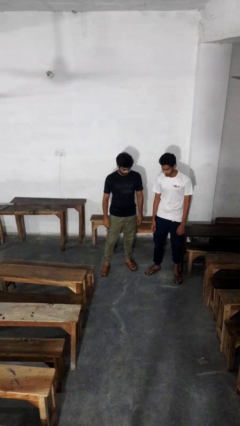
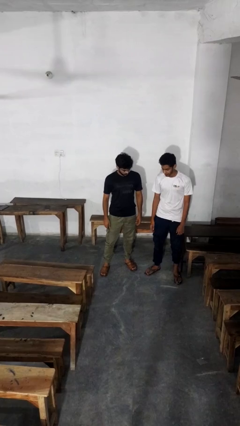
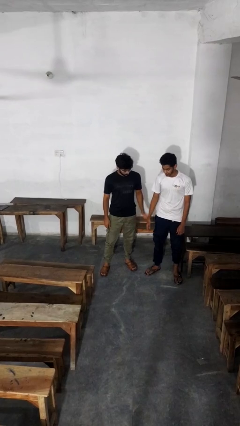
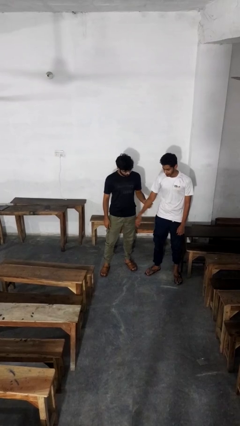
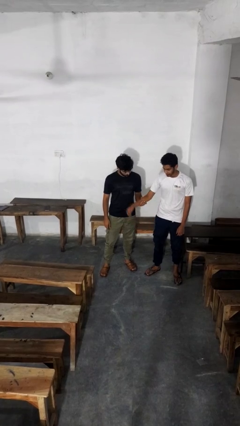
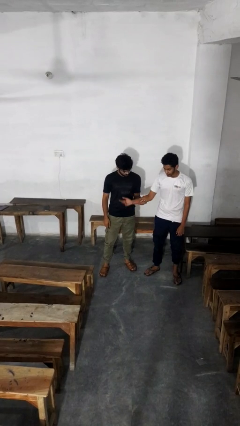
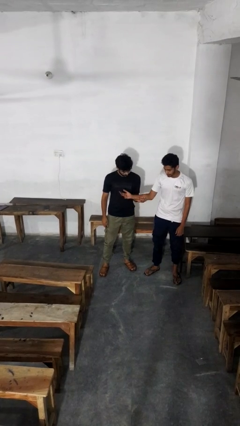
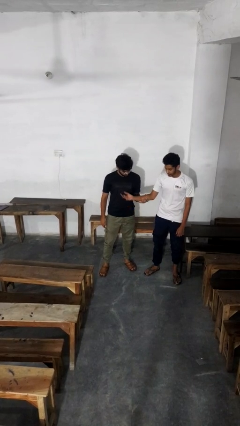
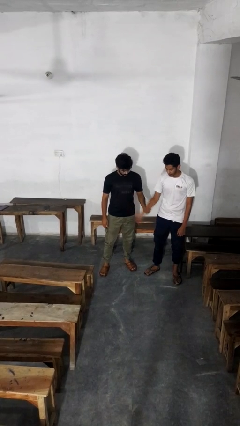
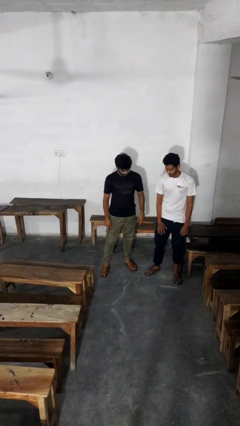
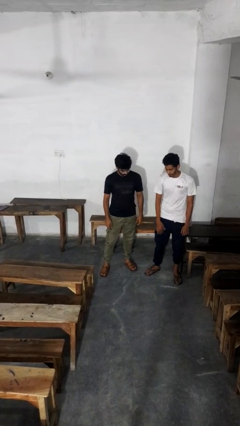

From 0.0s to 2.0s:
person grabs person by forearm

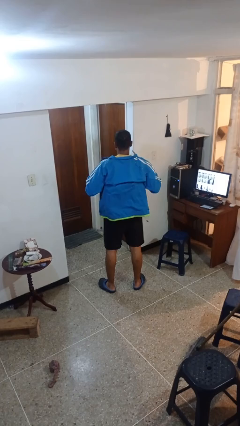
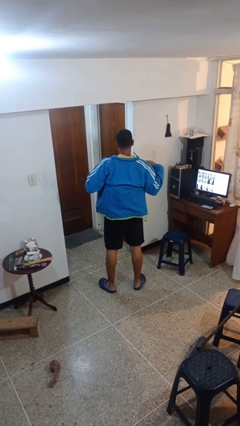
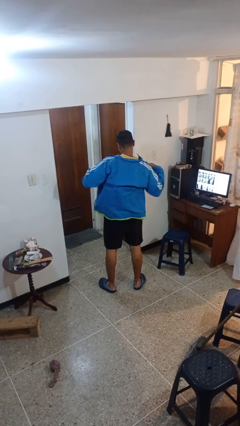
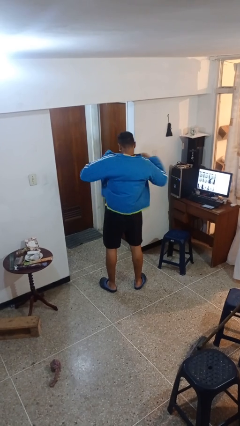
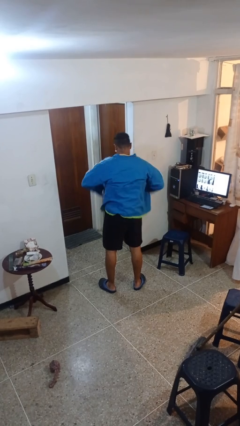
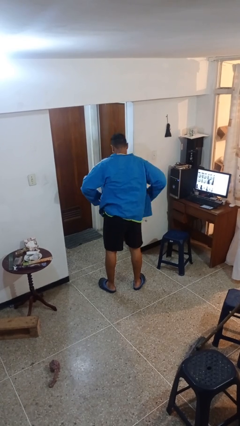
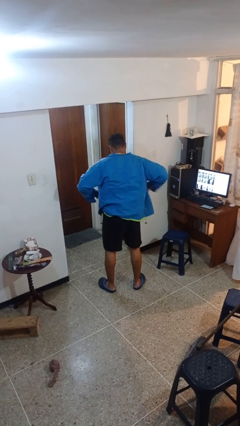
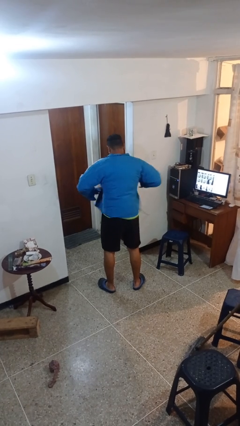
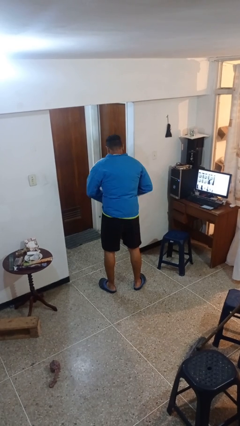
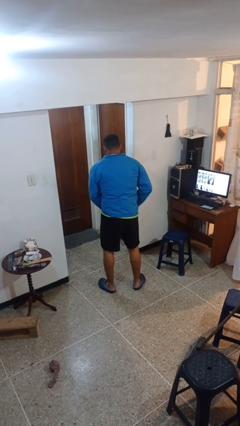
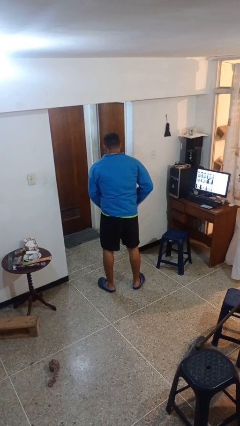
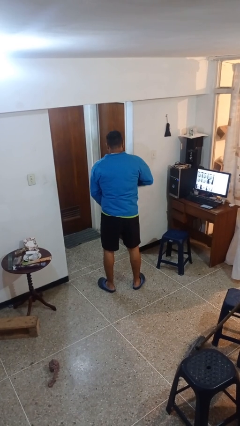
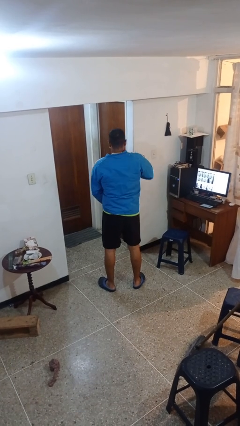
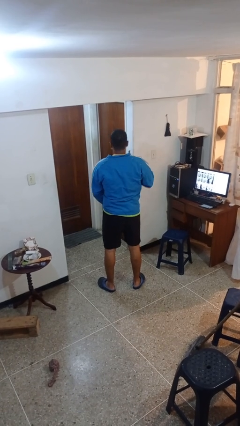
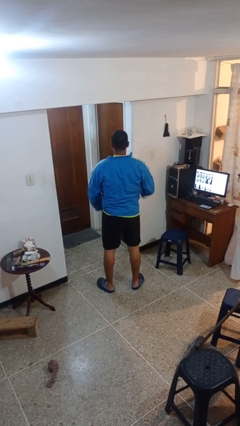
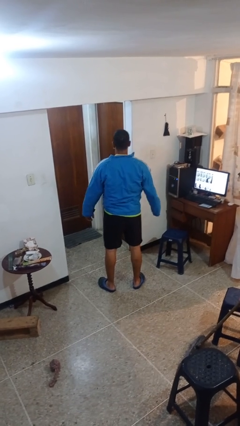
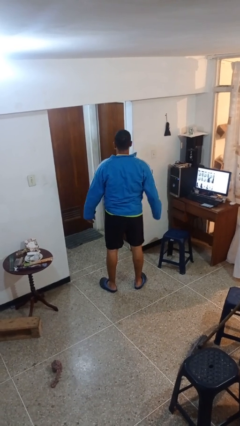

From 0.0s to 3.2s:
person zips up jacket

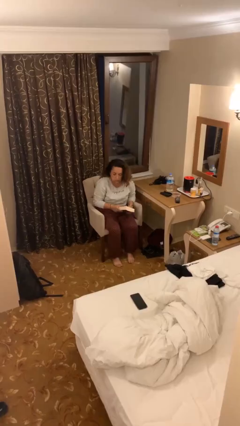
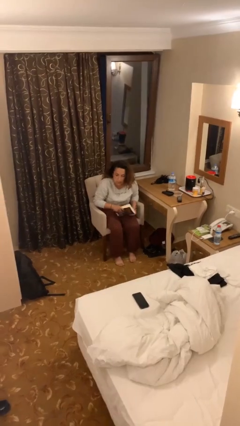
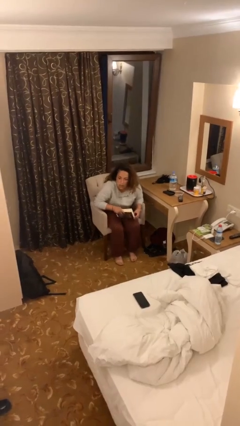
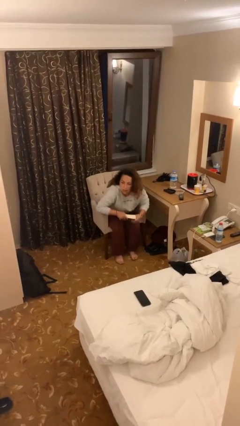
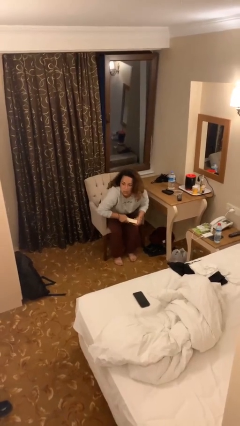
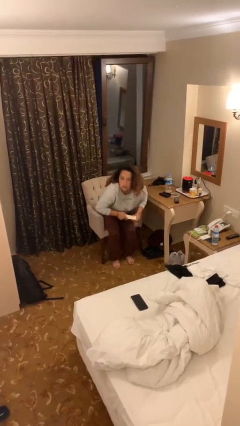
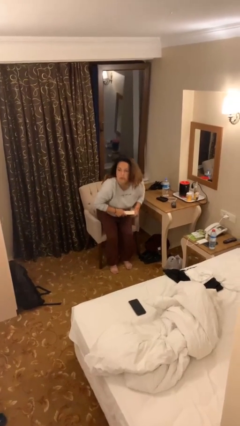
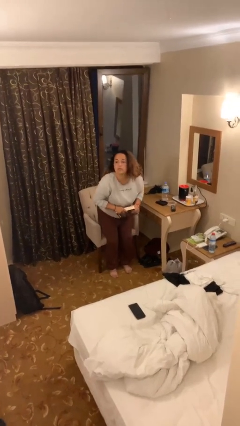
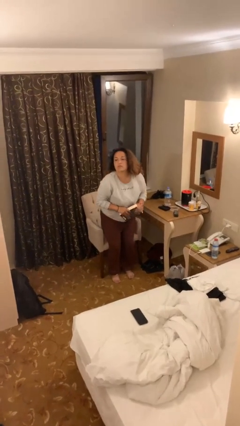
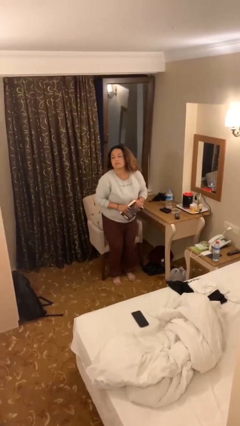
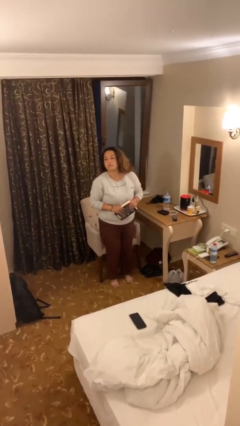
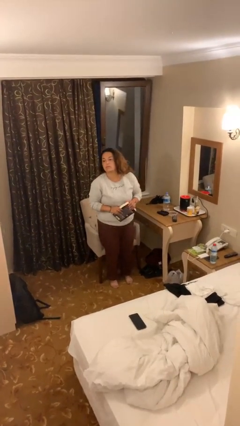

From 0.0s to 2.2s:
person stands up

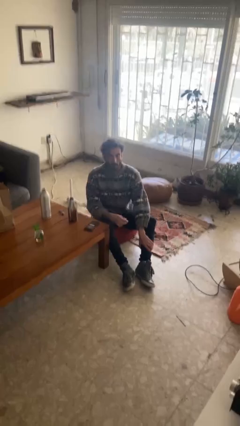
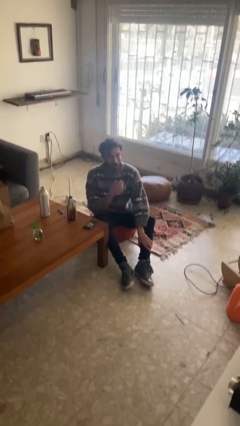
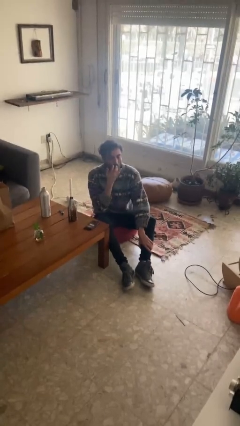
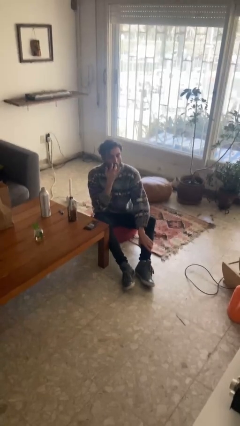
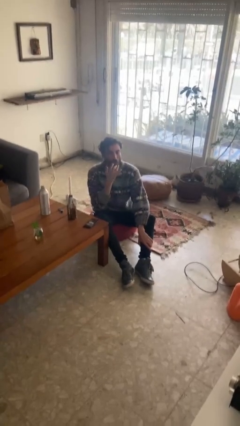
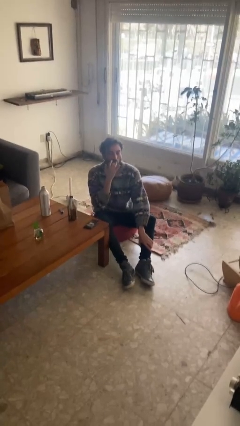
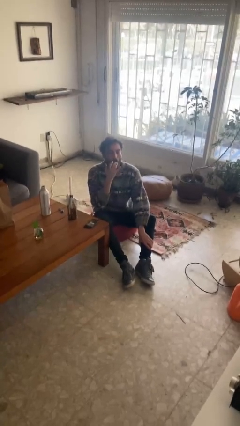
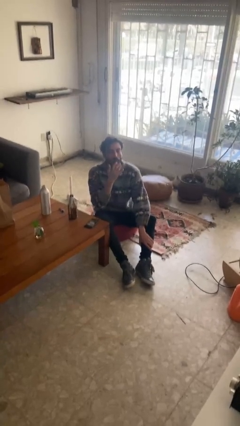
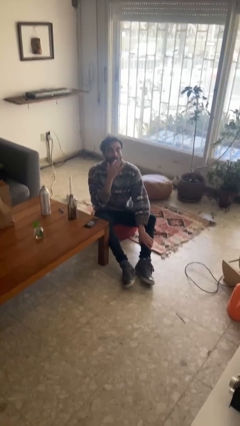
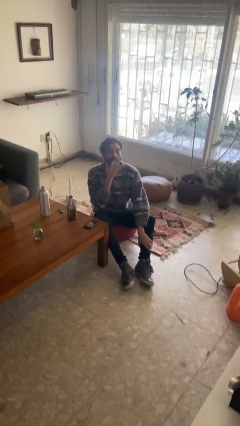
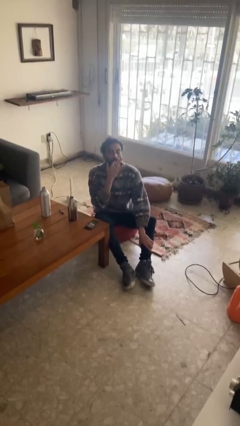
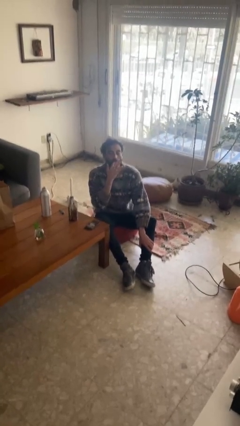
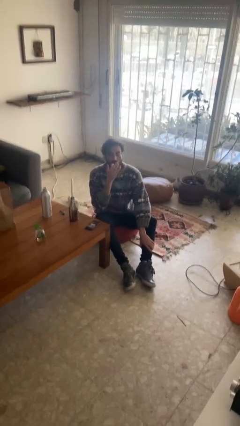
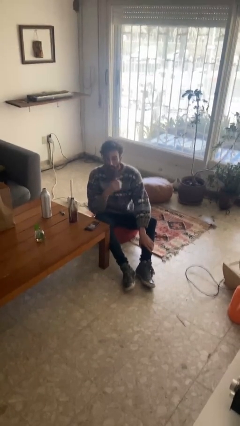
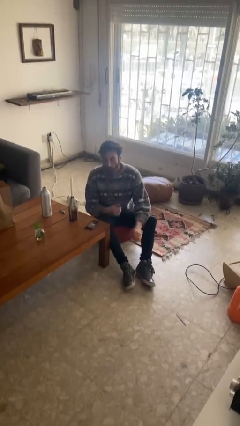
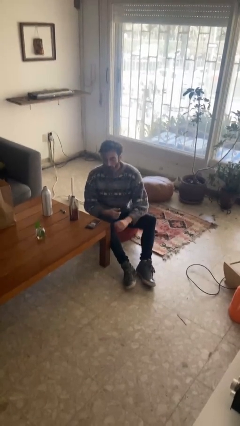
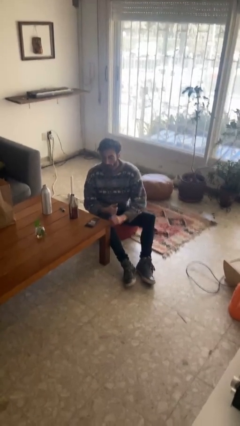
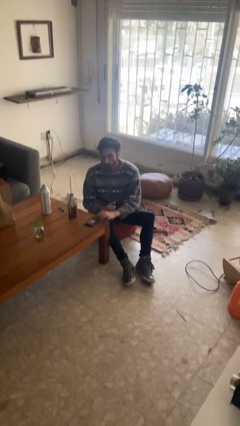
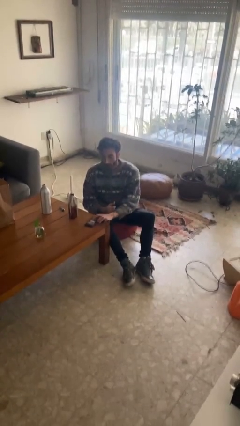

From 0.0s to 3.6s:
person licks fingers

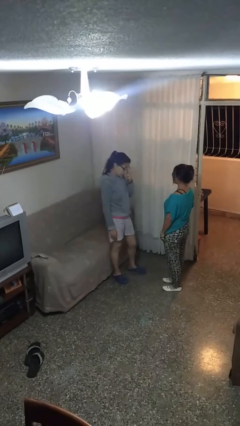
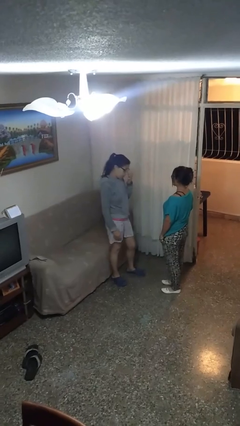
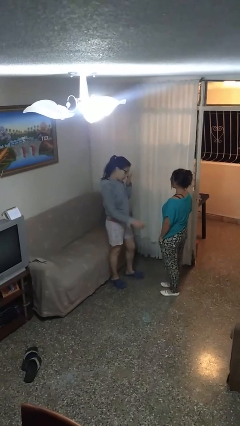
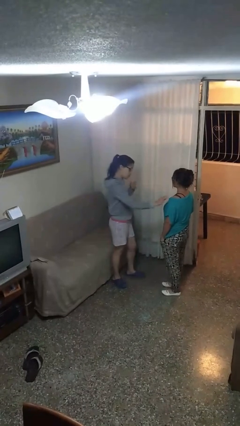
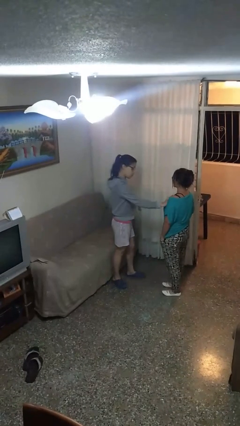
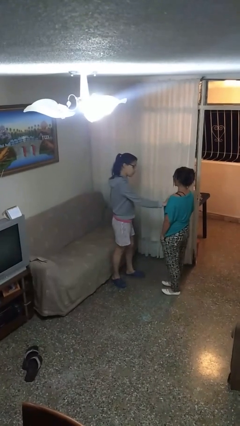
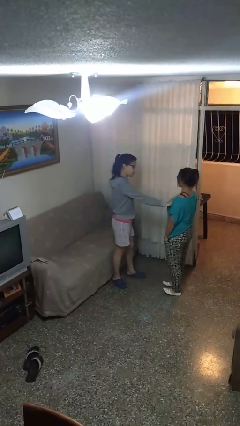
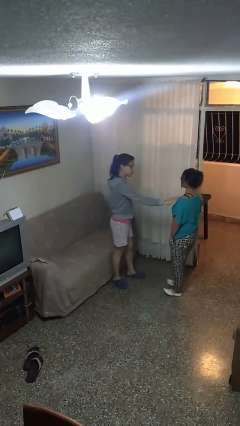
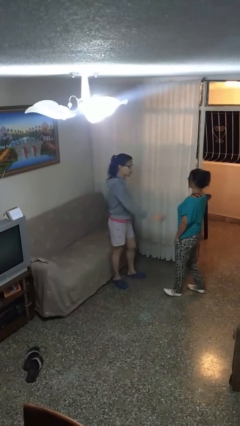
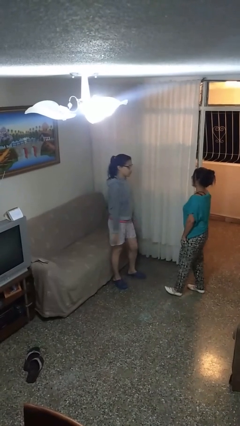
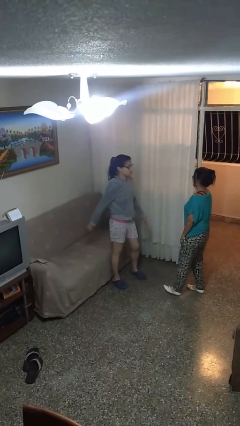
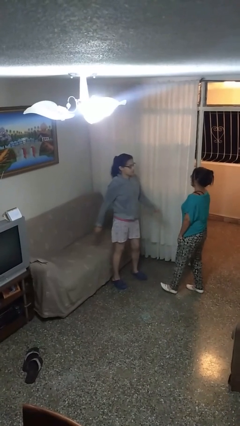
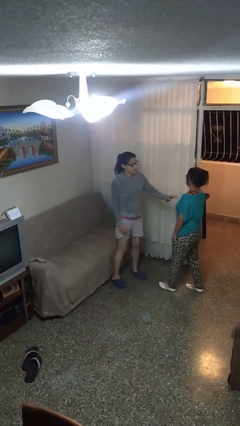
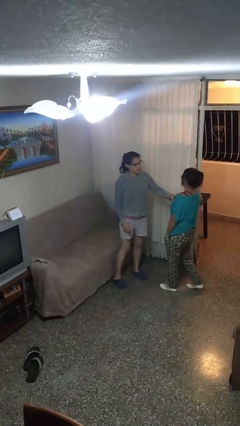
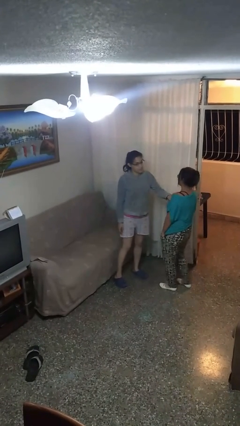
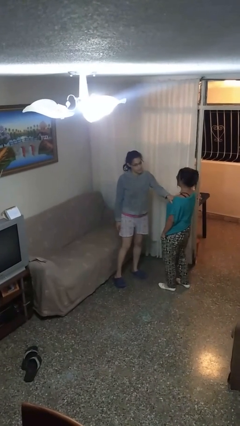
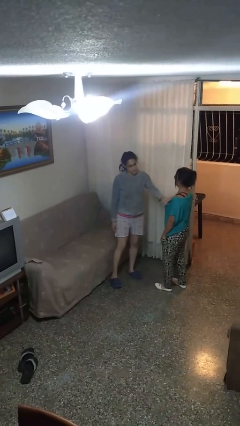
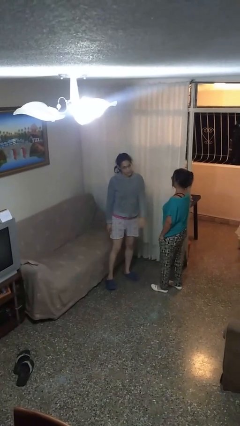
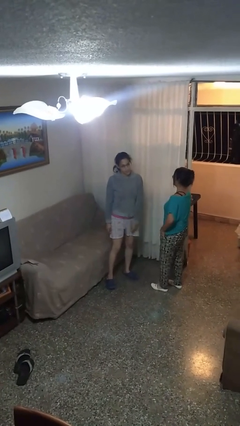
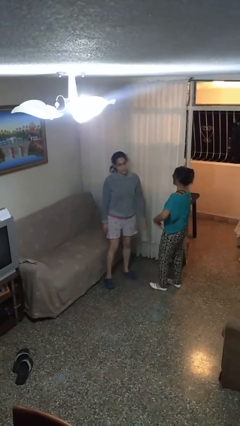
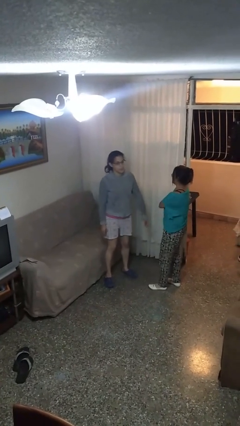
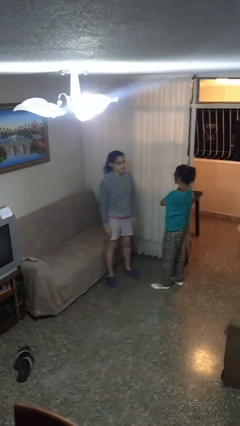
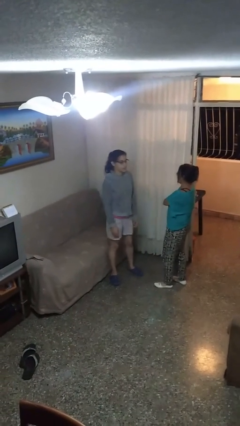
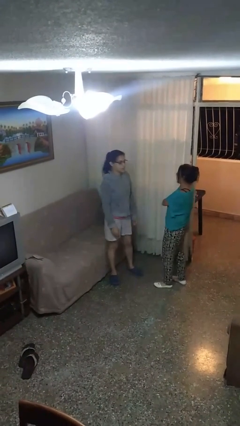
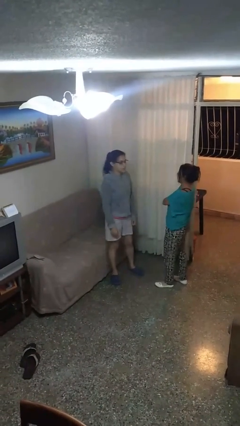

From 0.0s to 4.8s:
person shoves person

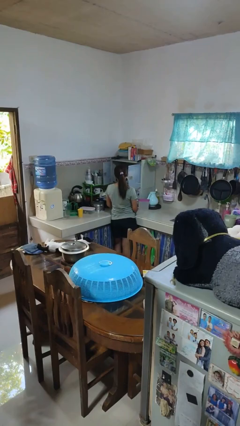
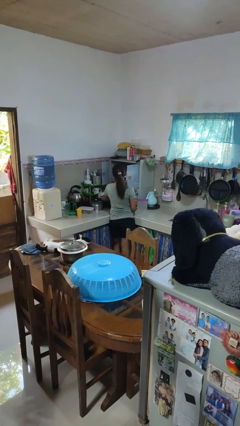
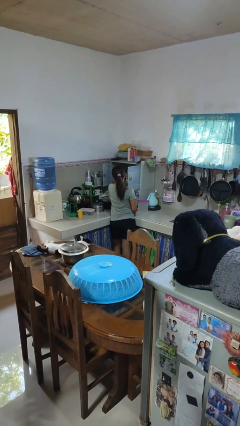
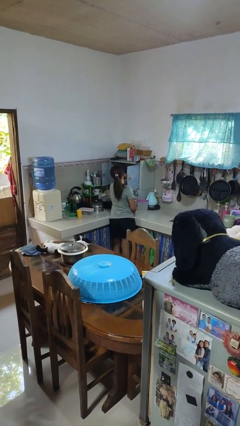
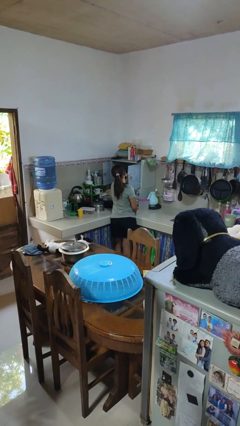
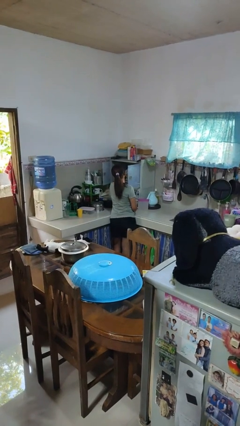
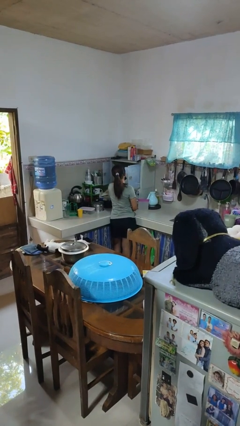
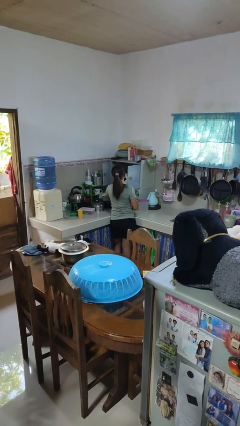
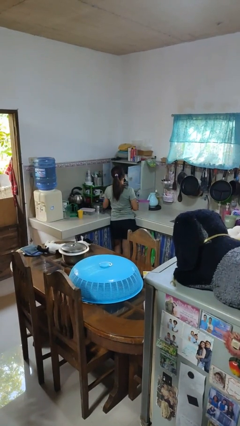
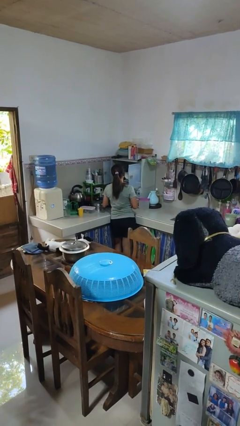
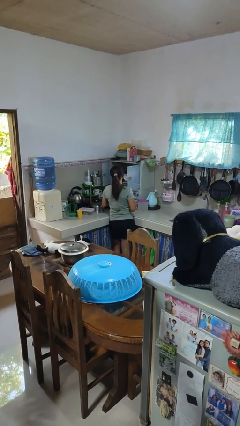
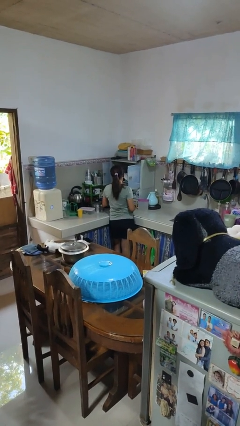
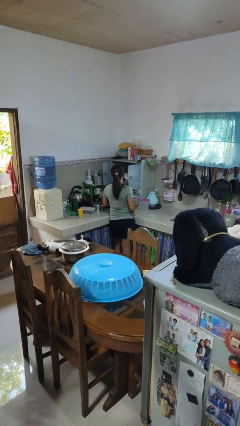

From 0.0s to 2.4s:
person takes object from kitchen drawer
